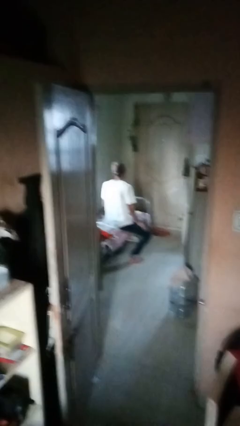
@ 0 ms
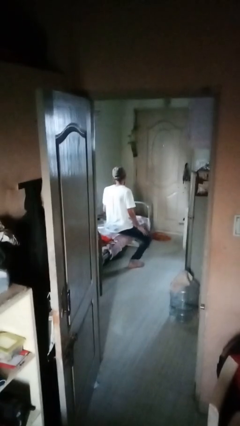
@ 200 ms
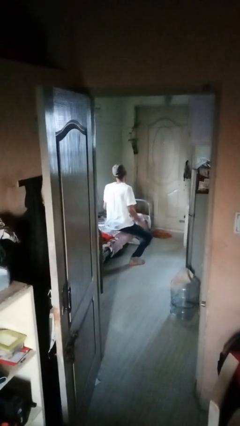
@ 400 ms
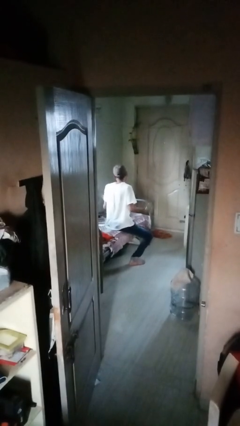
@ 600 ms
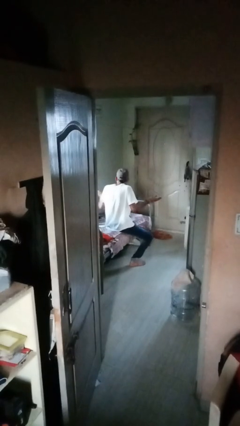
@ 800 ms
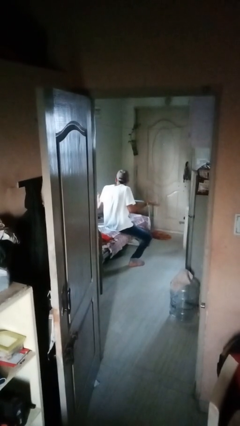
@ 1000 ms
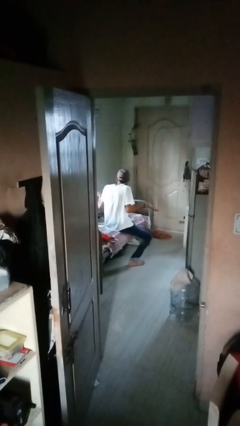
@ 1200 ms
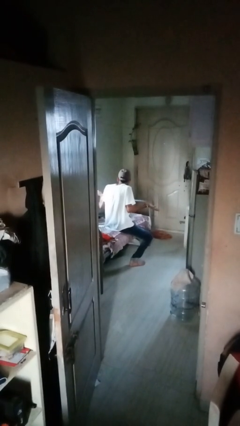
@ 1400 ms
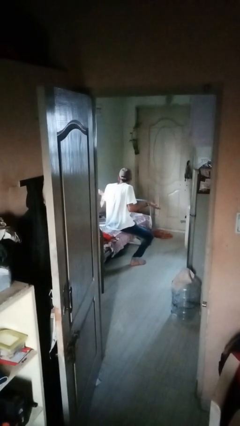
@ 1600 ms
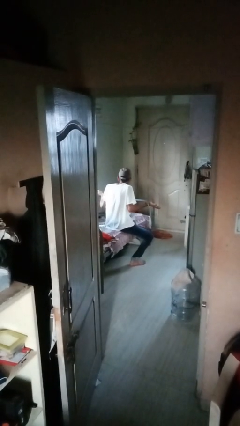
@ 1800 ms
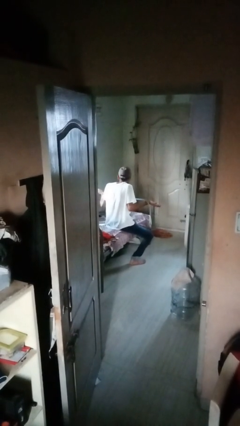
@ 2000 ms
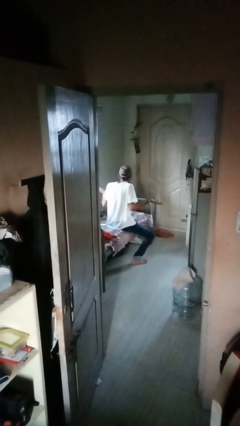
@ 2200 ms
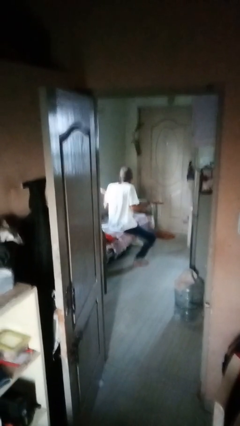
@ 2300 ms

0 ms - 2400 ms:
person shrugs

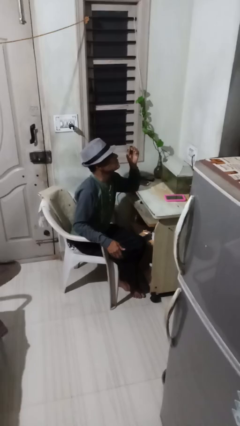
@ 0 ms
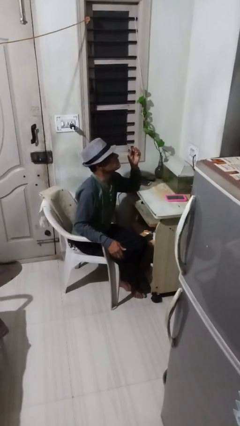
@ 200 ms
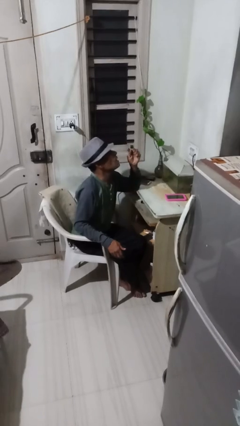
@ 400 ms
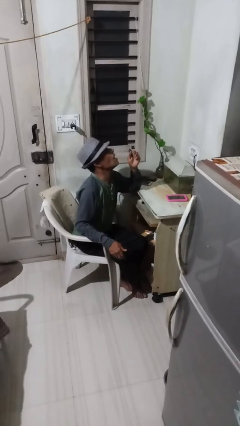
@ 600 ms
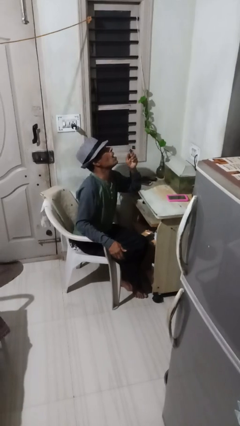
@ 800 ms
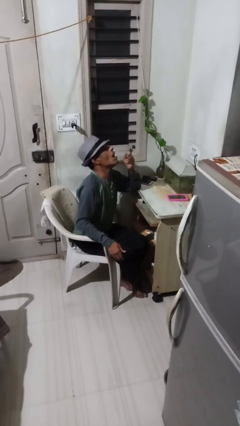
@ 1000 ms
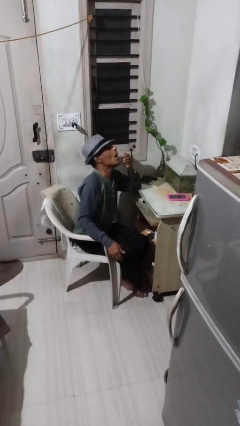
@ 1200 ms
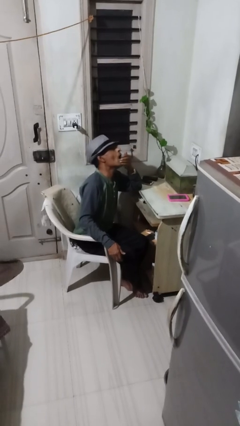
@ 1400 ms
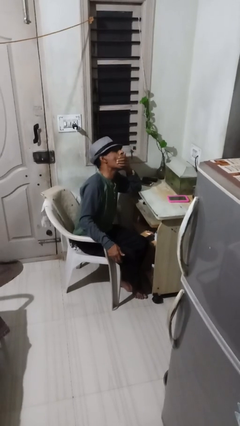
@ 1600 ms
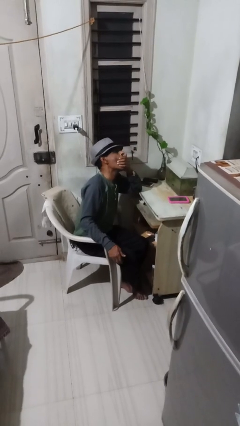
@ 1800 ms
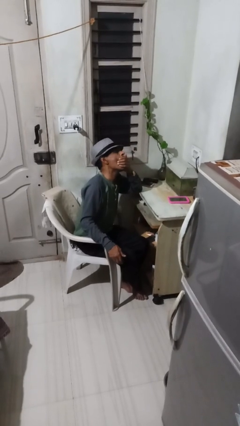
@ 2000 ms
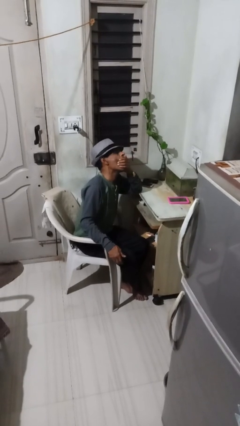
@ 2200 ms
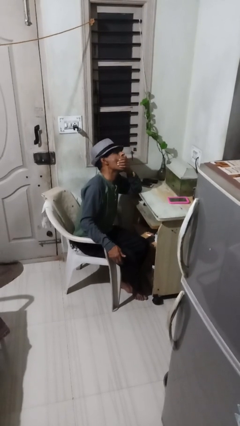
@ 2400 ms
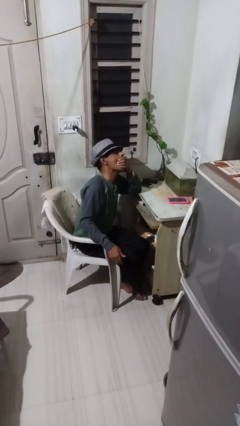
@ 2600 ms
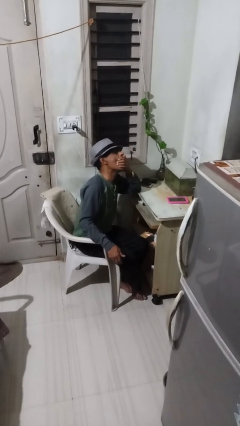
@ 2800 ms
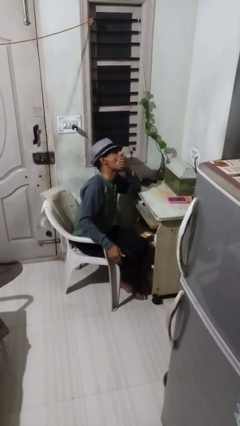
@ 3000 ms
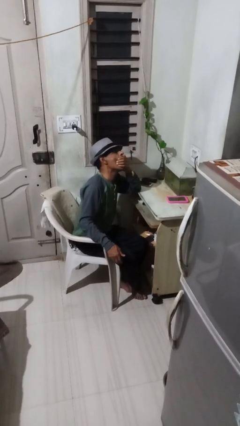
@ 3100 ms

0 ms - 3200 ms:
person yawns

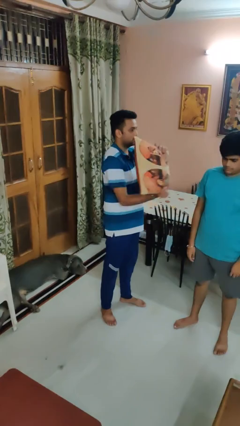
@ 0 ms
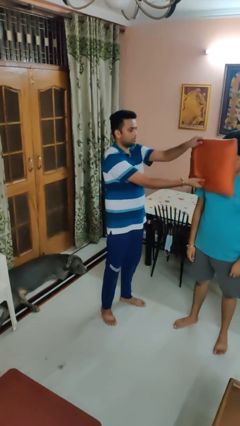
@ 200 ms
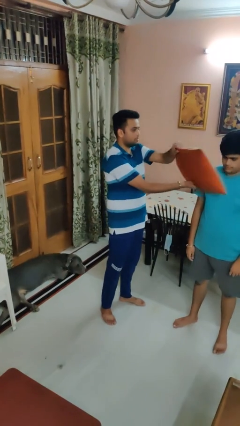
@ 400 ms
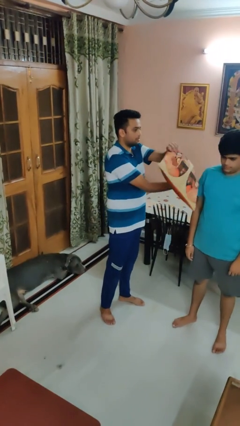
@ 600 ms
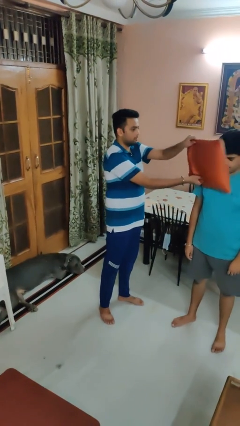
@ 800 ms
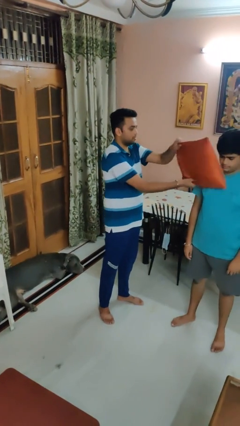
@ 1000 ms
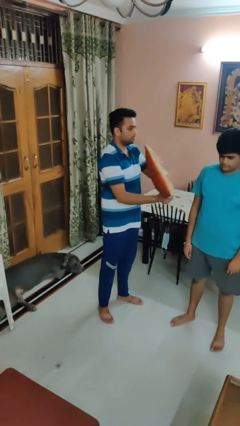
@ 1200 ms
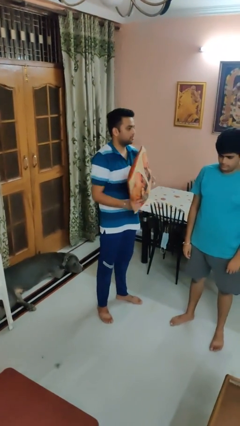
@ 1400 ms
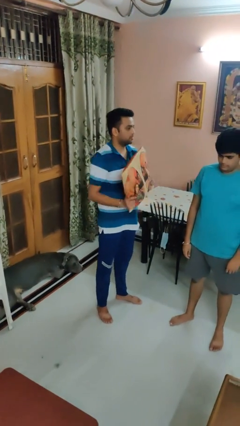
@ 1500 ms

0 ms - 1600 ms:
person hits person with pillow

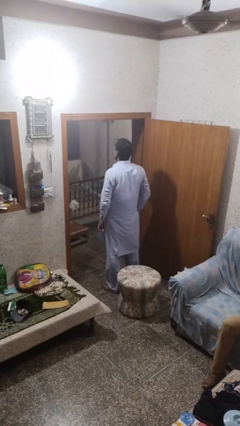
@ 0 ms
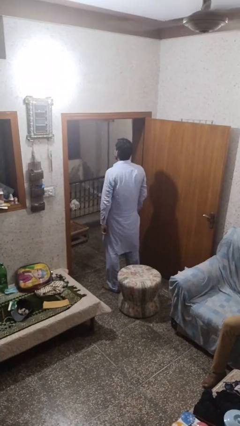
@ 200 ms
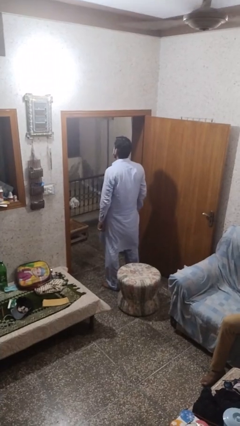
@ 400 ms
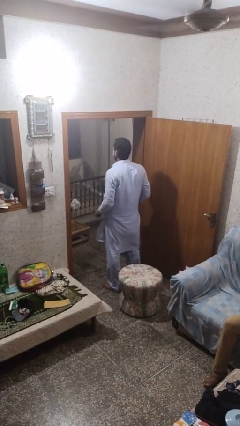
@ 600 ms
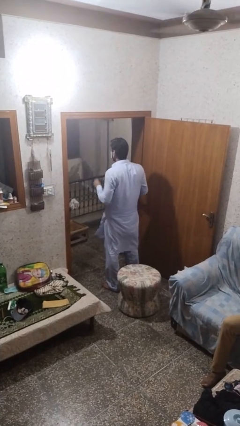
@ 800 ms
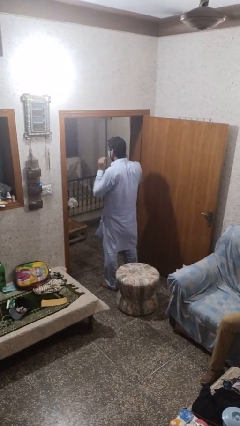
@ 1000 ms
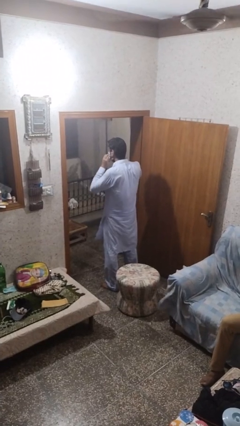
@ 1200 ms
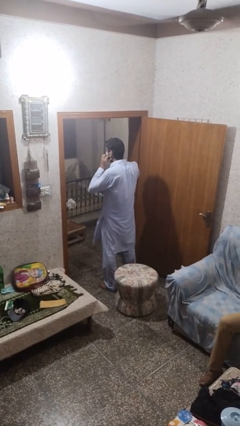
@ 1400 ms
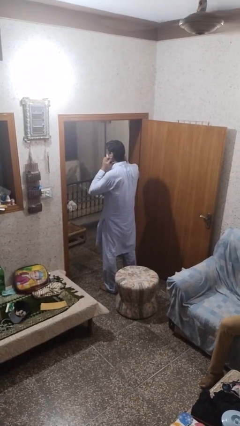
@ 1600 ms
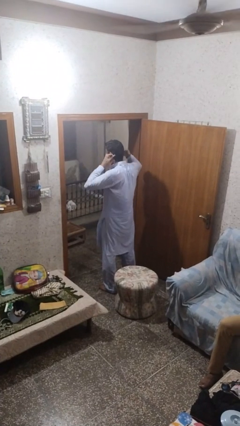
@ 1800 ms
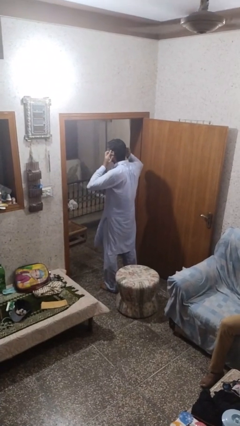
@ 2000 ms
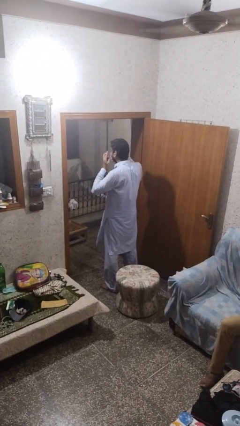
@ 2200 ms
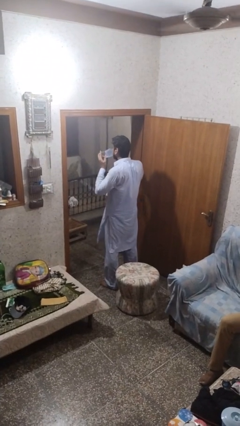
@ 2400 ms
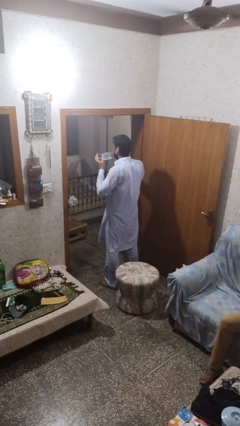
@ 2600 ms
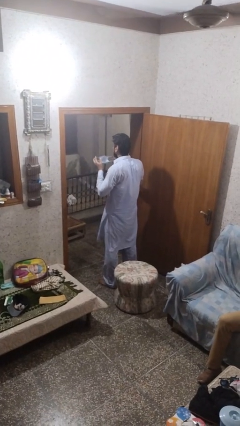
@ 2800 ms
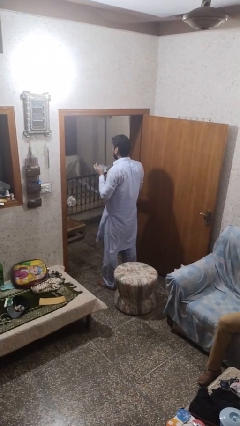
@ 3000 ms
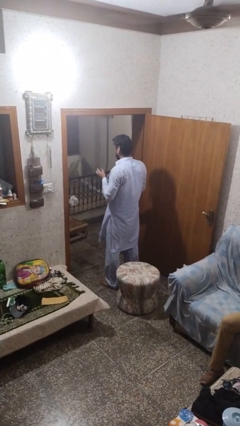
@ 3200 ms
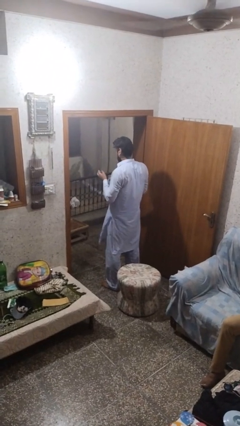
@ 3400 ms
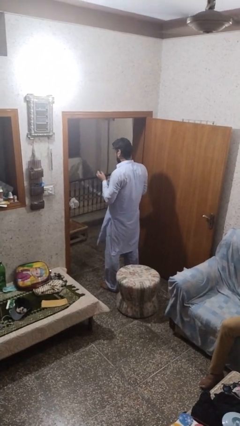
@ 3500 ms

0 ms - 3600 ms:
person takes off facemask

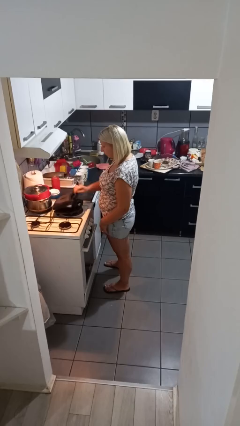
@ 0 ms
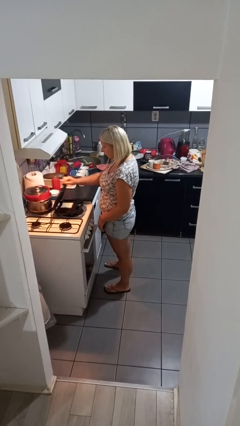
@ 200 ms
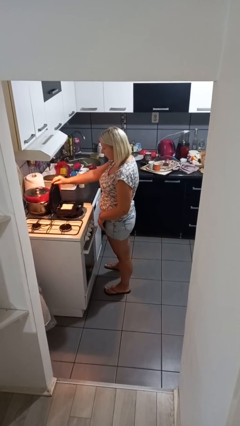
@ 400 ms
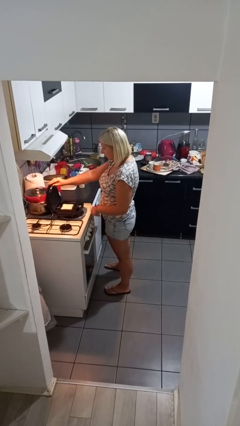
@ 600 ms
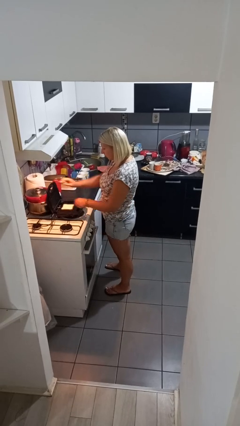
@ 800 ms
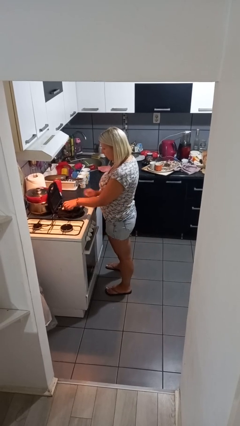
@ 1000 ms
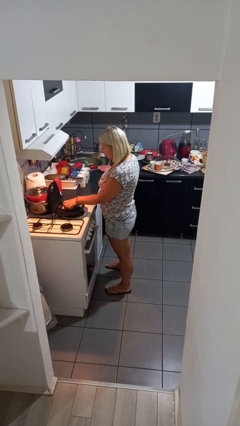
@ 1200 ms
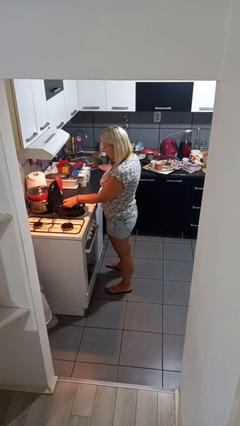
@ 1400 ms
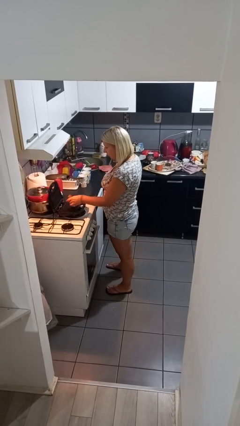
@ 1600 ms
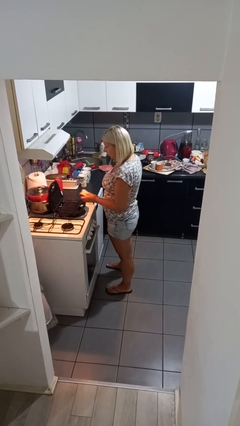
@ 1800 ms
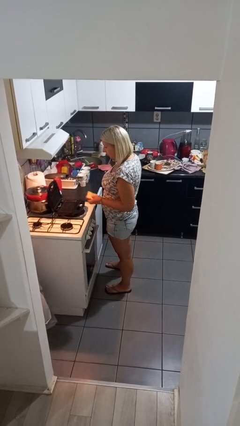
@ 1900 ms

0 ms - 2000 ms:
person takes object from toaster

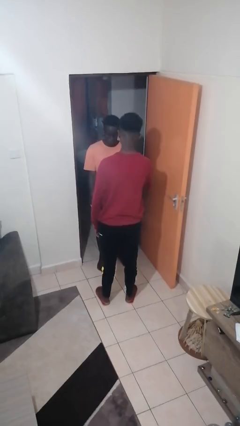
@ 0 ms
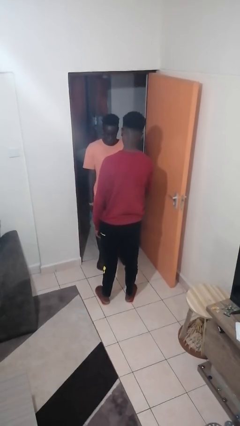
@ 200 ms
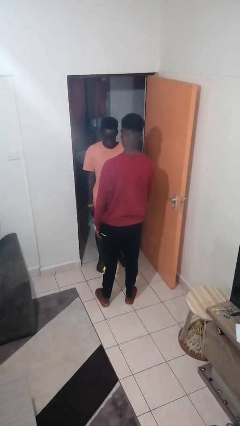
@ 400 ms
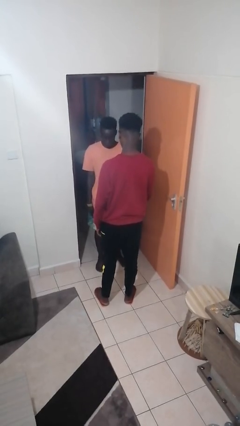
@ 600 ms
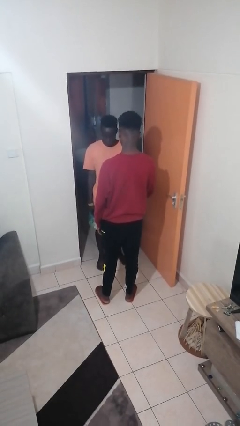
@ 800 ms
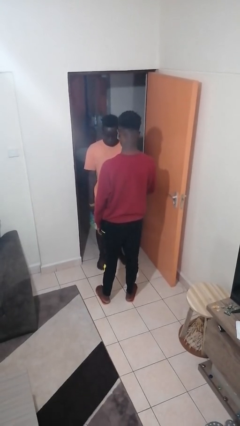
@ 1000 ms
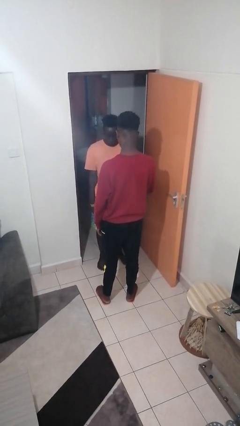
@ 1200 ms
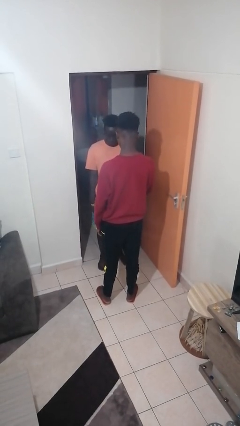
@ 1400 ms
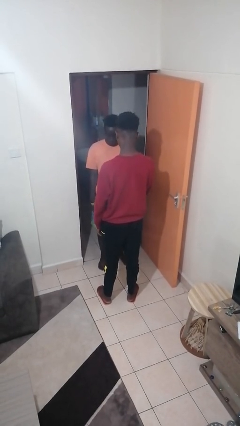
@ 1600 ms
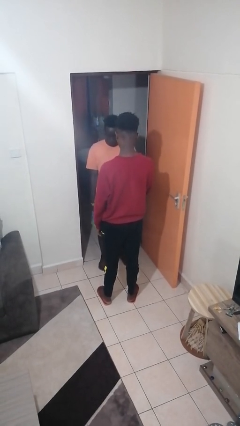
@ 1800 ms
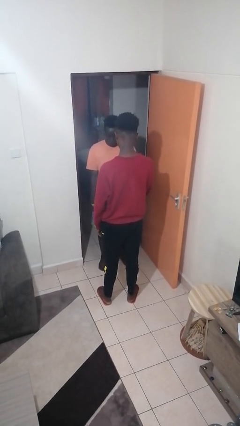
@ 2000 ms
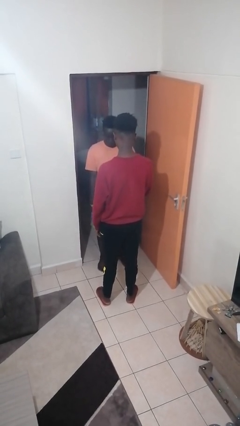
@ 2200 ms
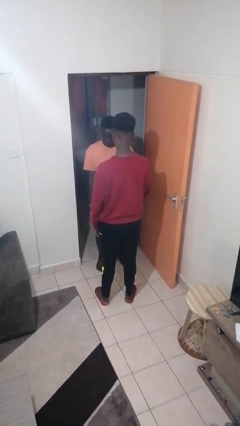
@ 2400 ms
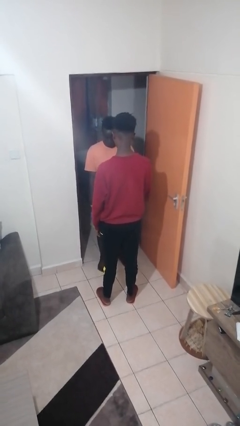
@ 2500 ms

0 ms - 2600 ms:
person grabs person by forearm

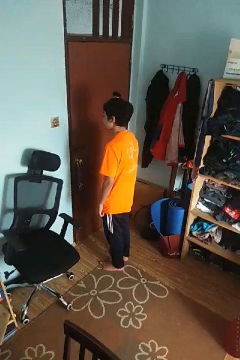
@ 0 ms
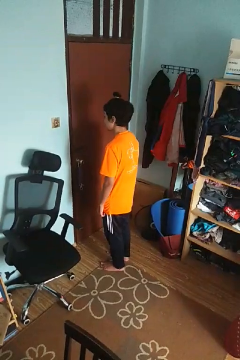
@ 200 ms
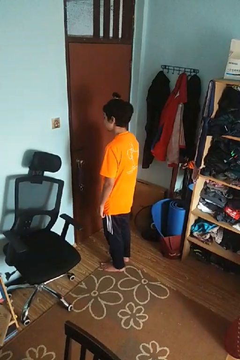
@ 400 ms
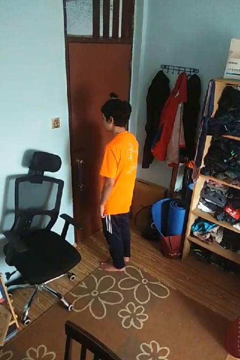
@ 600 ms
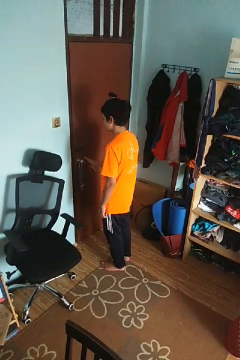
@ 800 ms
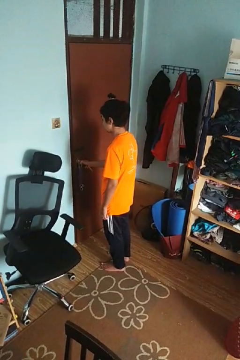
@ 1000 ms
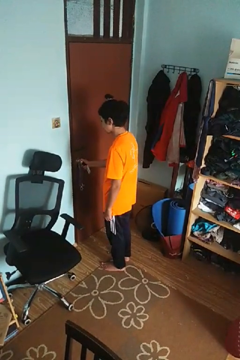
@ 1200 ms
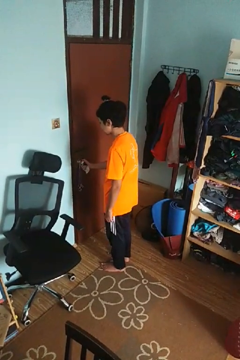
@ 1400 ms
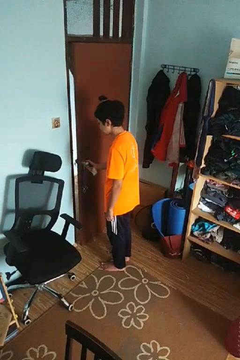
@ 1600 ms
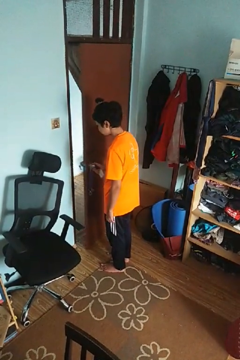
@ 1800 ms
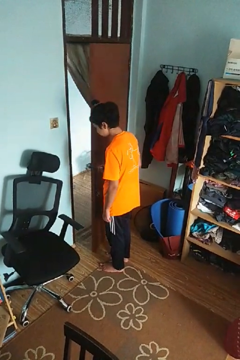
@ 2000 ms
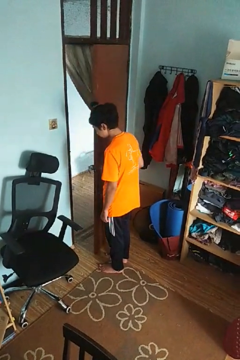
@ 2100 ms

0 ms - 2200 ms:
person opens facility door
